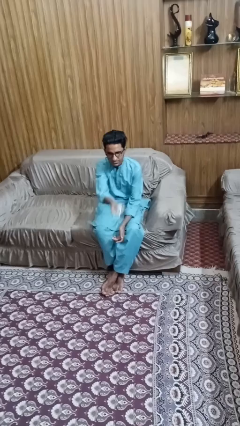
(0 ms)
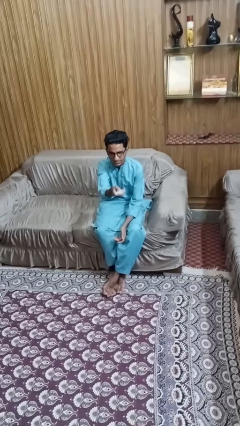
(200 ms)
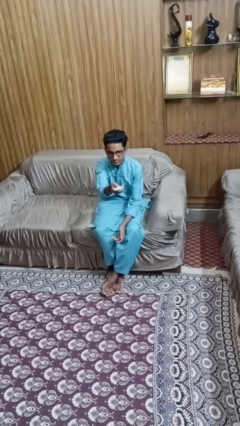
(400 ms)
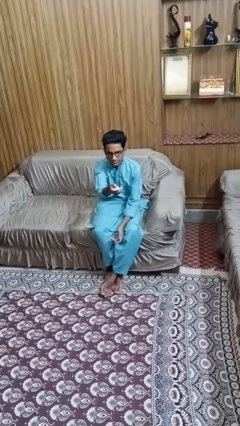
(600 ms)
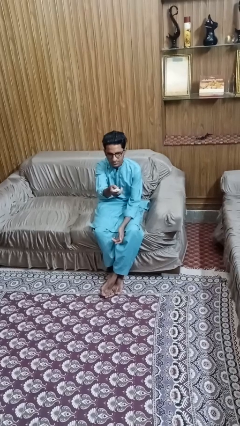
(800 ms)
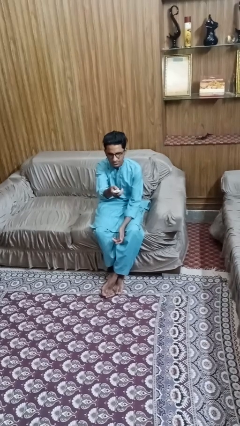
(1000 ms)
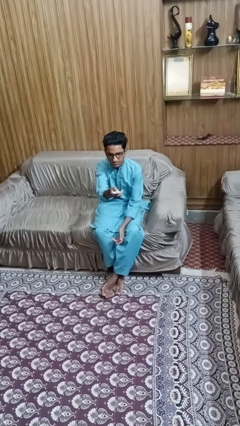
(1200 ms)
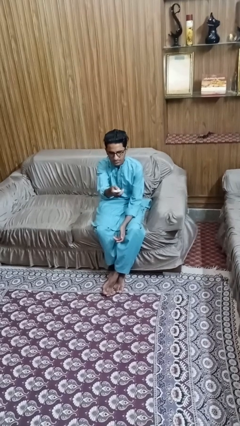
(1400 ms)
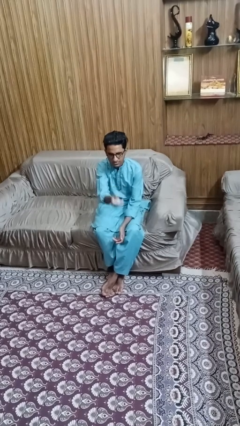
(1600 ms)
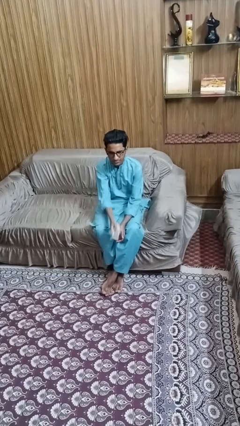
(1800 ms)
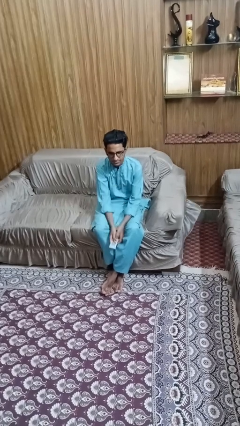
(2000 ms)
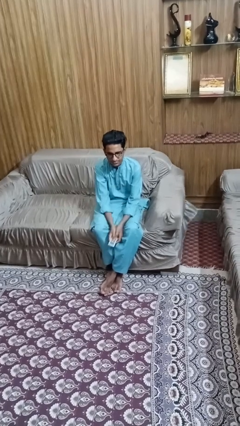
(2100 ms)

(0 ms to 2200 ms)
person uses television remote

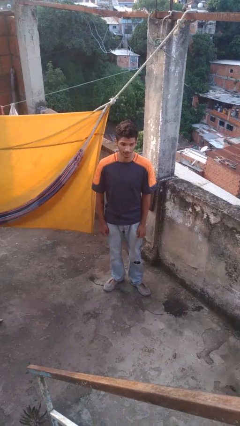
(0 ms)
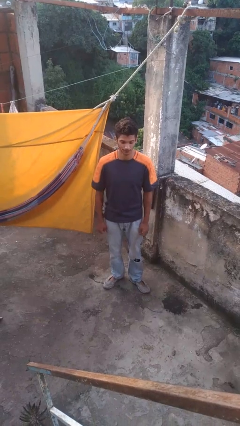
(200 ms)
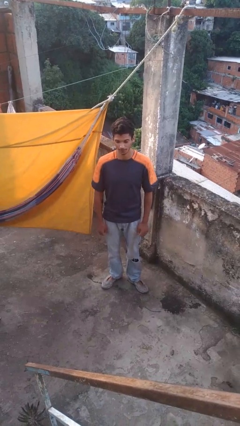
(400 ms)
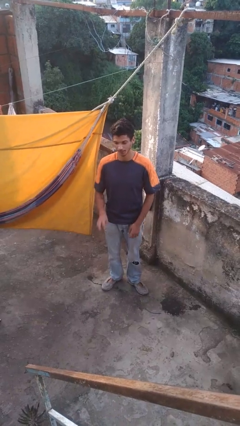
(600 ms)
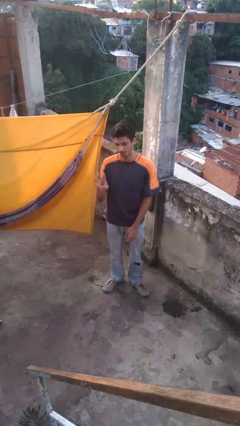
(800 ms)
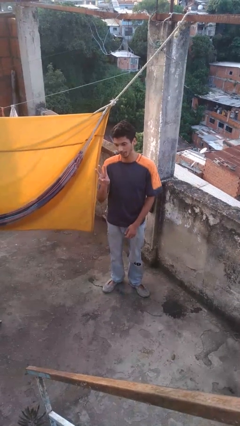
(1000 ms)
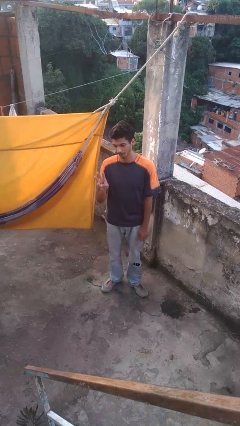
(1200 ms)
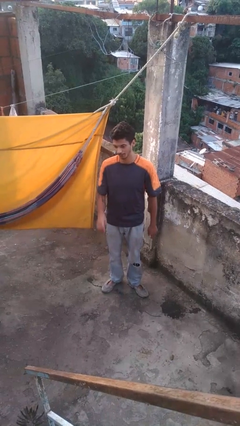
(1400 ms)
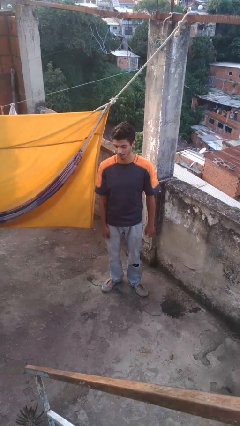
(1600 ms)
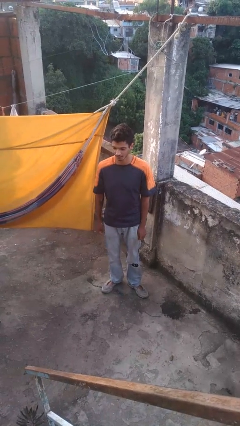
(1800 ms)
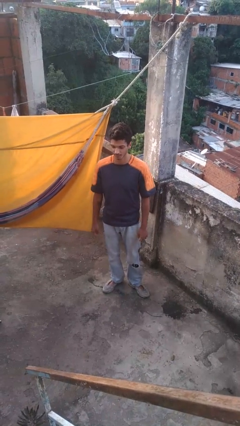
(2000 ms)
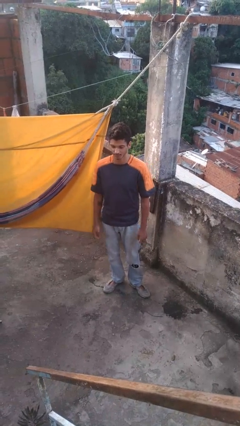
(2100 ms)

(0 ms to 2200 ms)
person gestures number three

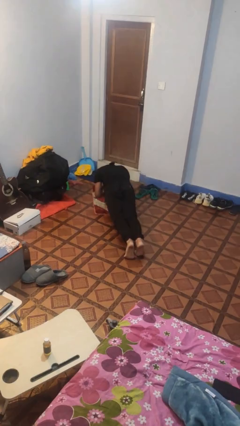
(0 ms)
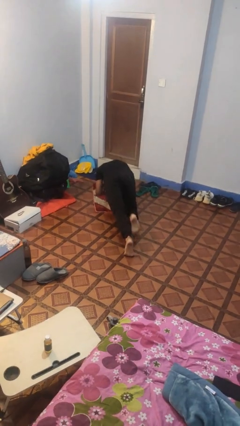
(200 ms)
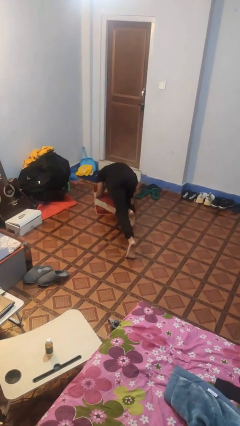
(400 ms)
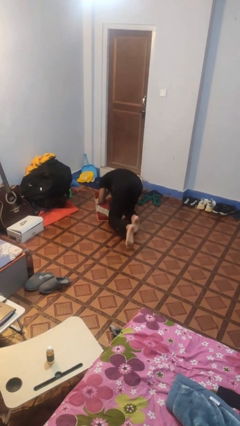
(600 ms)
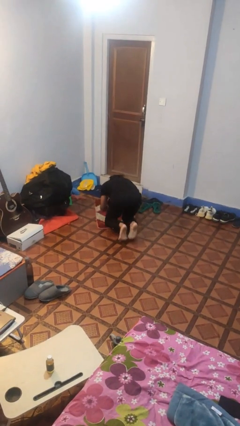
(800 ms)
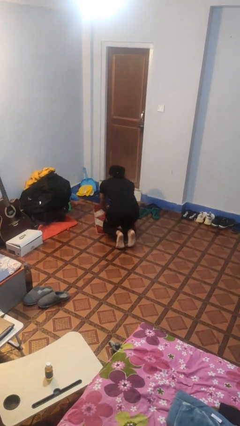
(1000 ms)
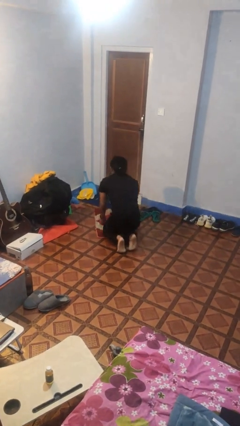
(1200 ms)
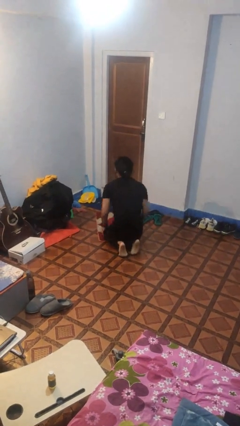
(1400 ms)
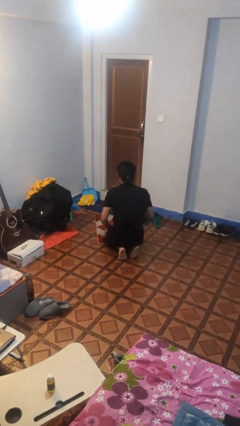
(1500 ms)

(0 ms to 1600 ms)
person stands up from floor

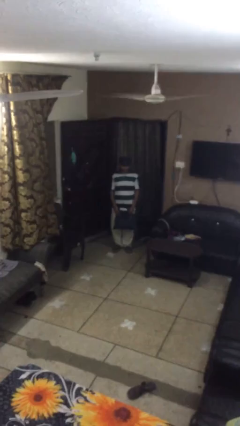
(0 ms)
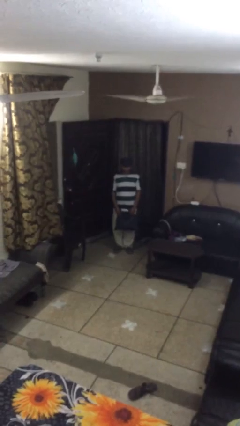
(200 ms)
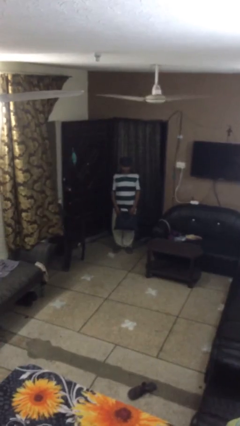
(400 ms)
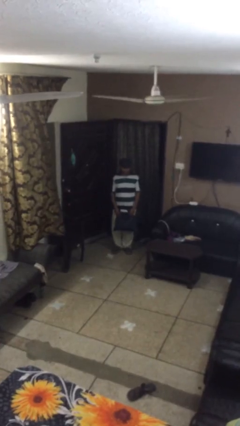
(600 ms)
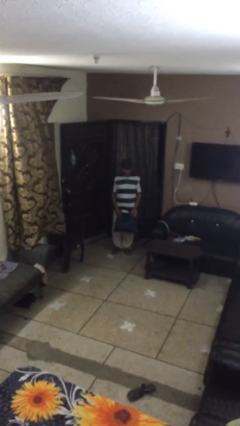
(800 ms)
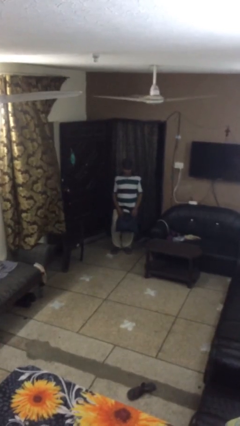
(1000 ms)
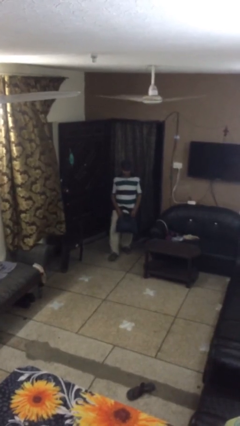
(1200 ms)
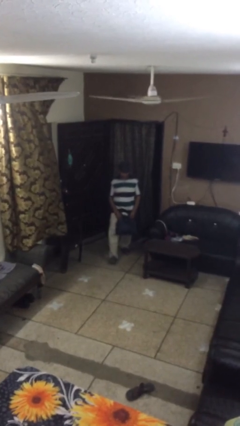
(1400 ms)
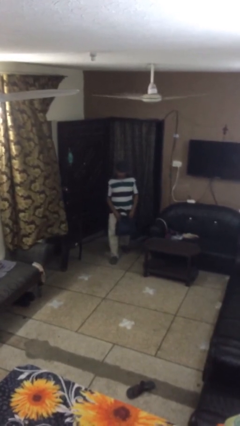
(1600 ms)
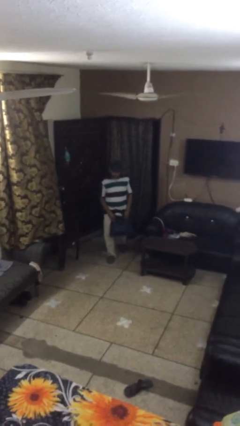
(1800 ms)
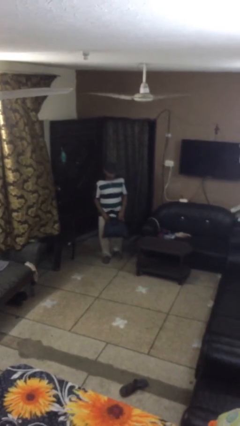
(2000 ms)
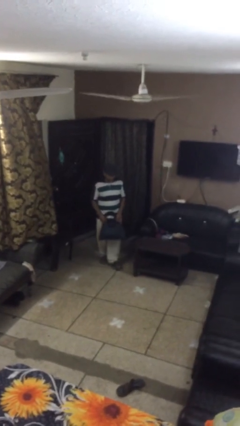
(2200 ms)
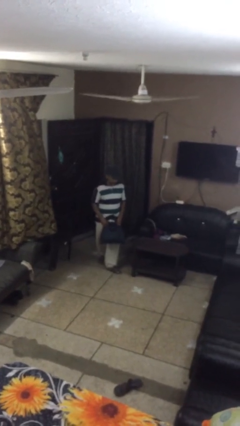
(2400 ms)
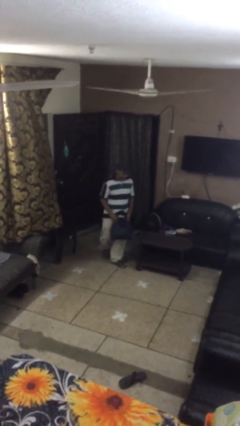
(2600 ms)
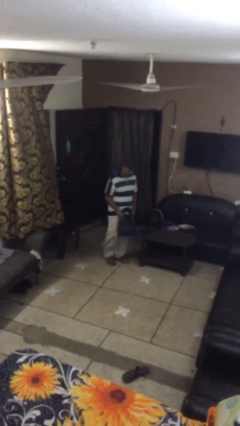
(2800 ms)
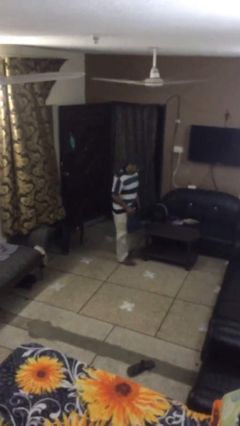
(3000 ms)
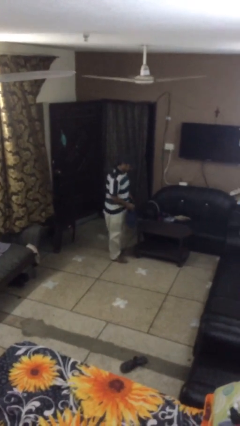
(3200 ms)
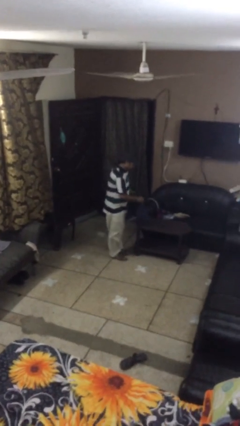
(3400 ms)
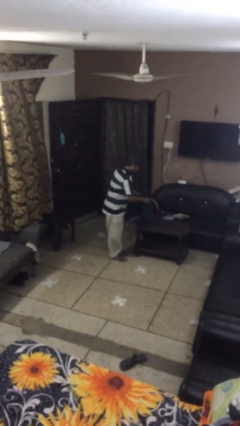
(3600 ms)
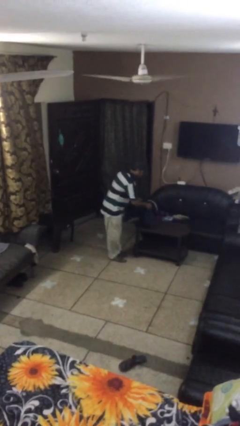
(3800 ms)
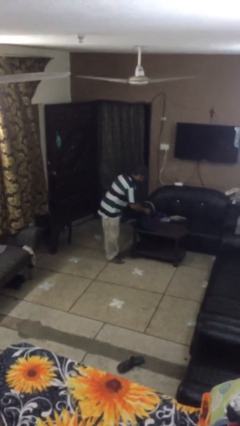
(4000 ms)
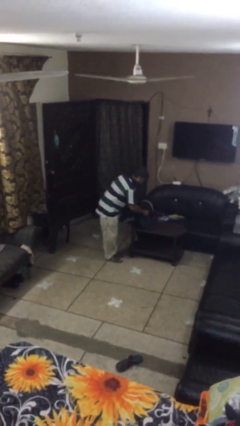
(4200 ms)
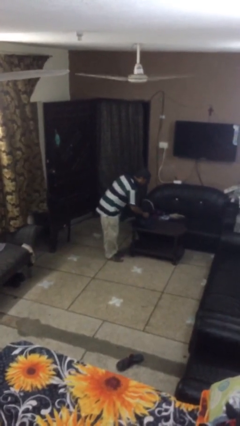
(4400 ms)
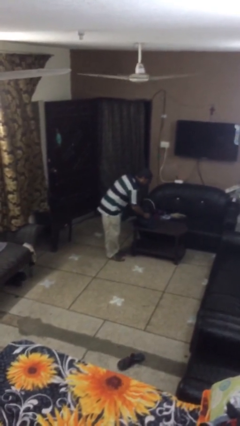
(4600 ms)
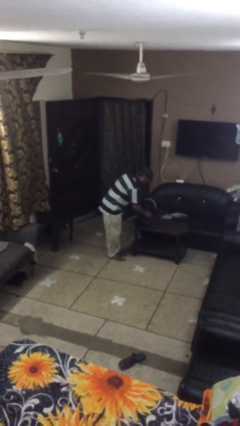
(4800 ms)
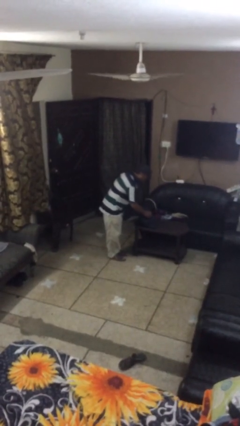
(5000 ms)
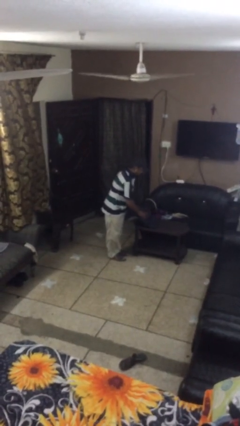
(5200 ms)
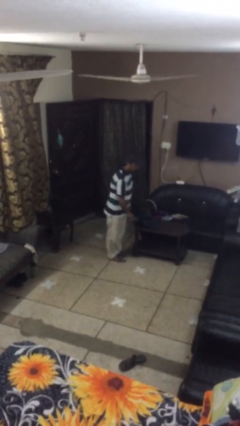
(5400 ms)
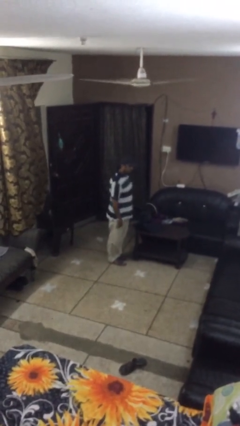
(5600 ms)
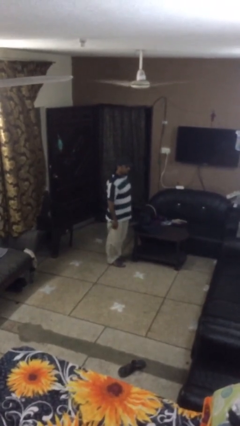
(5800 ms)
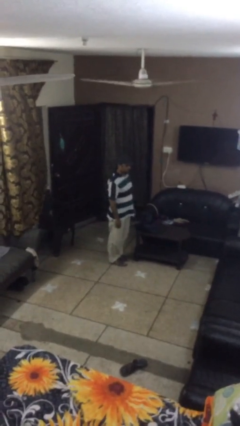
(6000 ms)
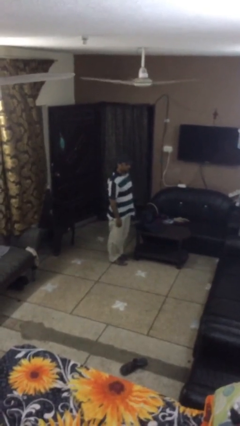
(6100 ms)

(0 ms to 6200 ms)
person puts down object on table

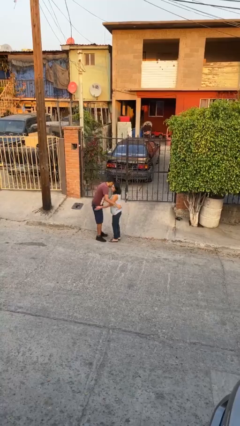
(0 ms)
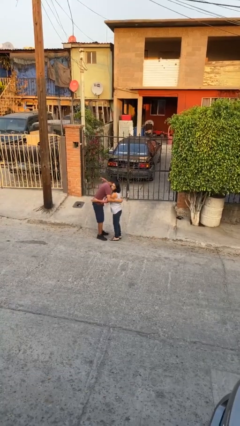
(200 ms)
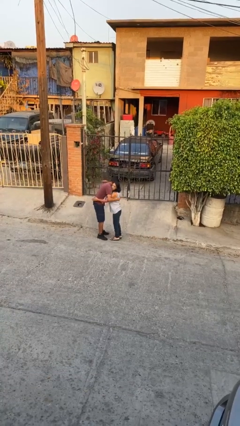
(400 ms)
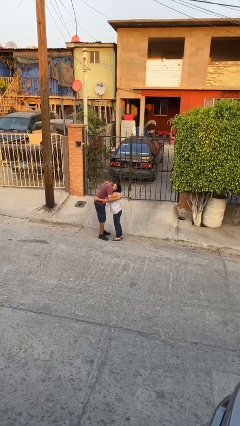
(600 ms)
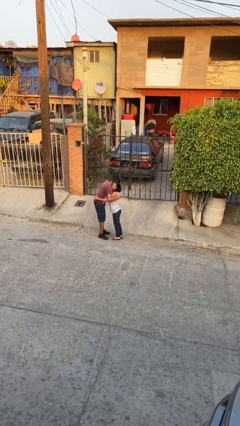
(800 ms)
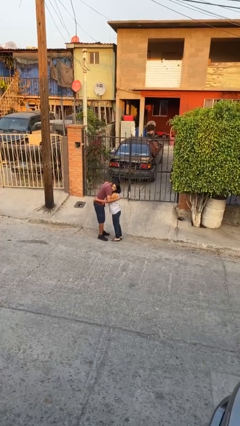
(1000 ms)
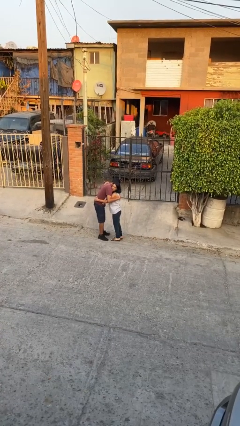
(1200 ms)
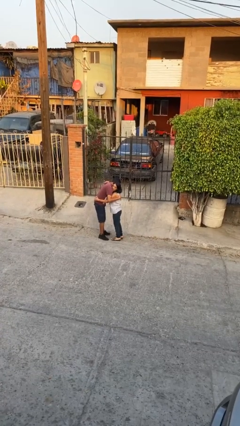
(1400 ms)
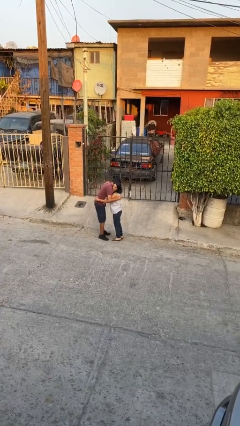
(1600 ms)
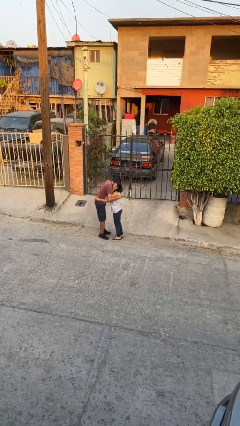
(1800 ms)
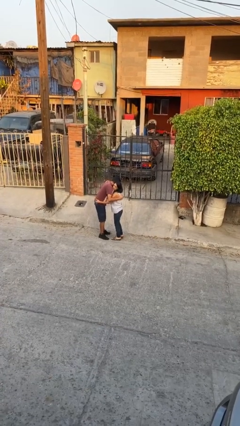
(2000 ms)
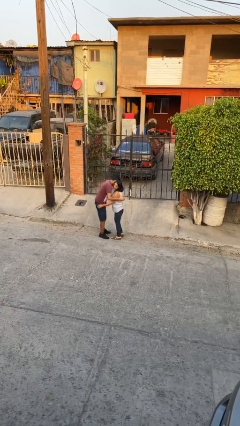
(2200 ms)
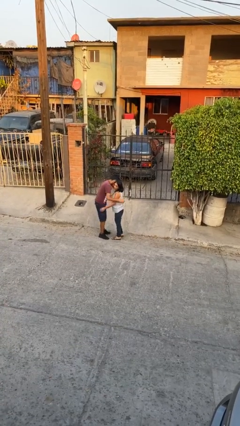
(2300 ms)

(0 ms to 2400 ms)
person embraces person

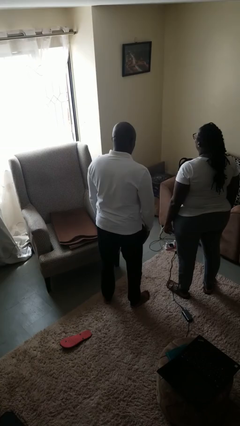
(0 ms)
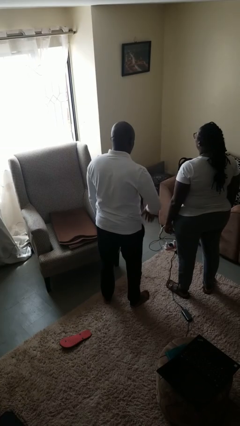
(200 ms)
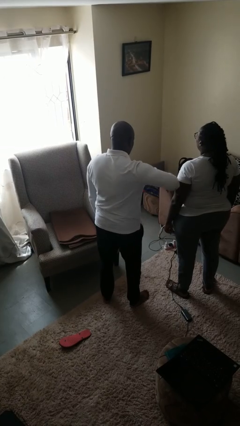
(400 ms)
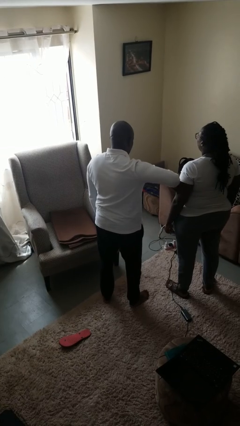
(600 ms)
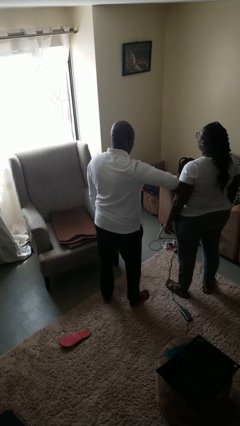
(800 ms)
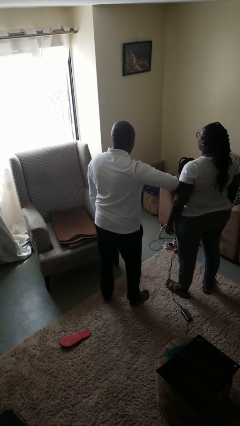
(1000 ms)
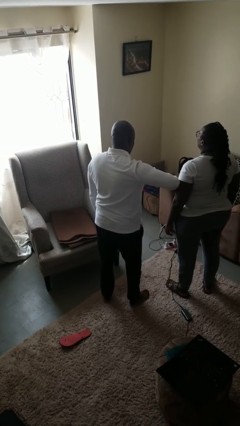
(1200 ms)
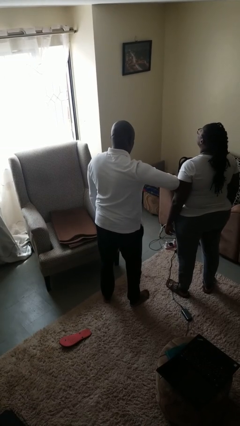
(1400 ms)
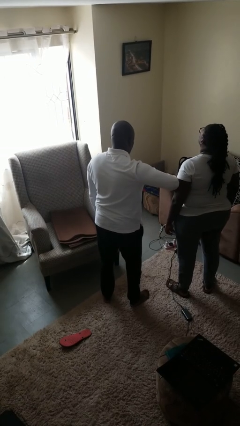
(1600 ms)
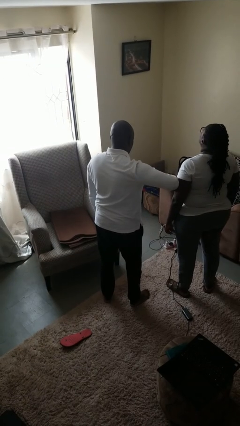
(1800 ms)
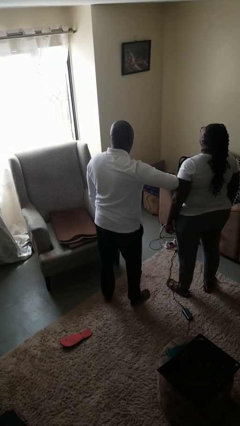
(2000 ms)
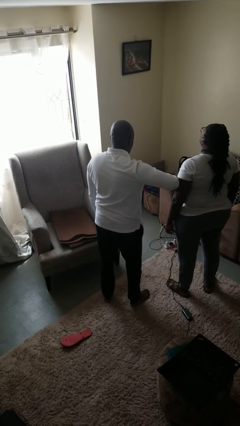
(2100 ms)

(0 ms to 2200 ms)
person grabs person by bicep

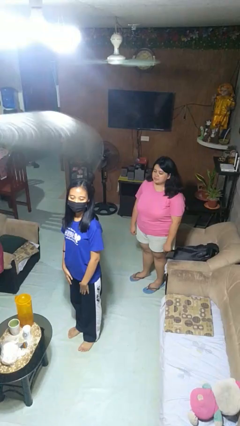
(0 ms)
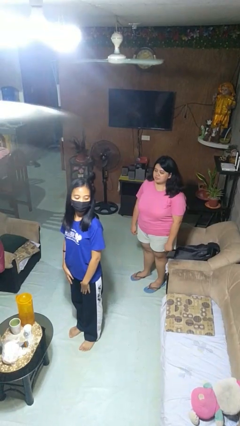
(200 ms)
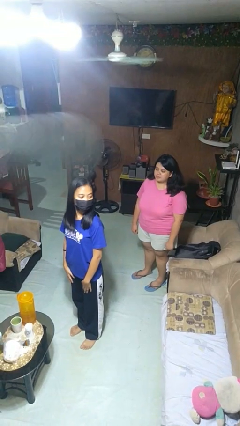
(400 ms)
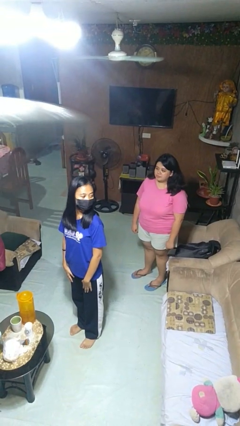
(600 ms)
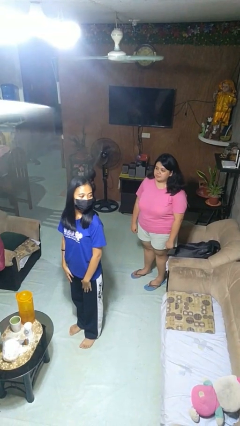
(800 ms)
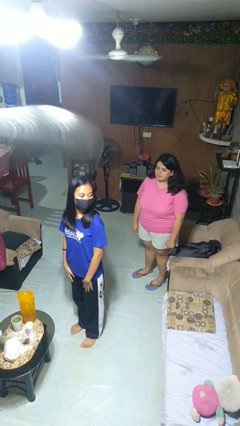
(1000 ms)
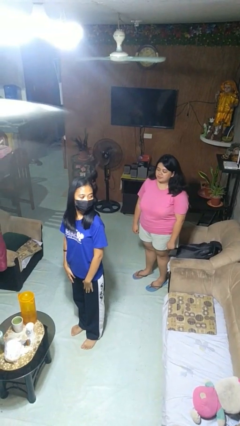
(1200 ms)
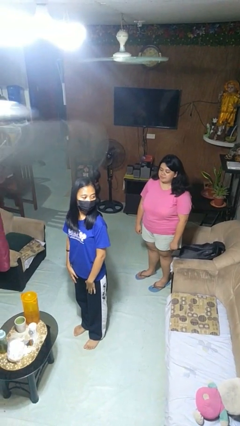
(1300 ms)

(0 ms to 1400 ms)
person looks over shoulder
